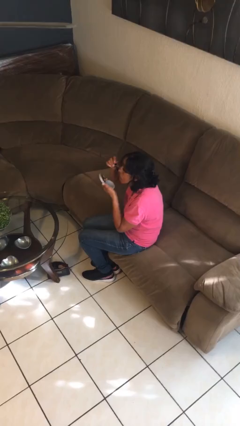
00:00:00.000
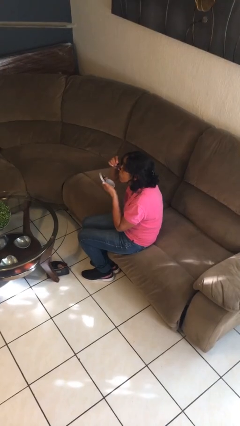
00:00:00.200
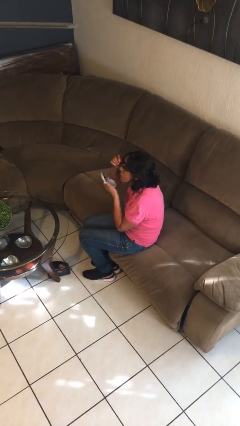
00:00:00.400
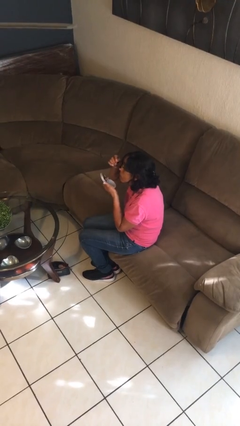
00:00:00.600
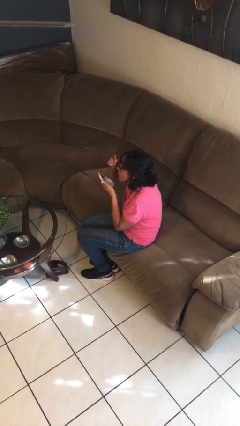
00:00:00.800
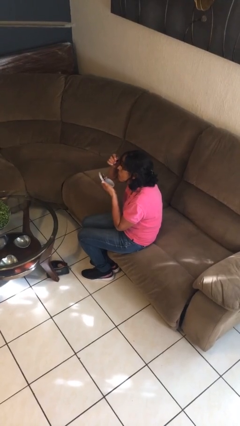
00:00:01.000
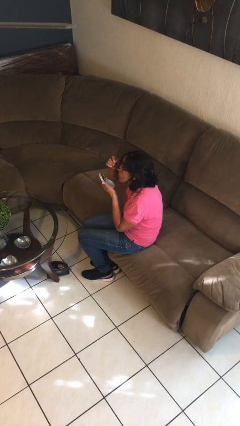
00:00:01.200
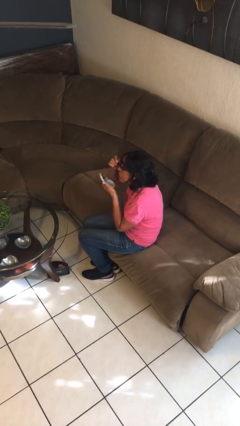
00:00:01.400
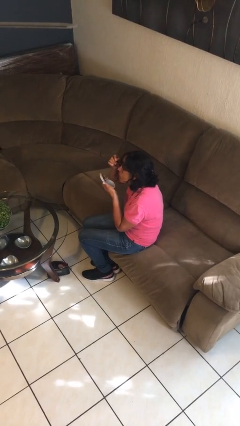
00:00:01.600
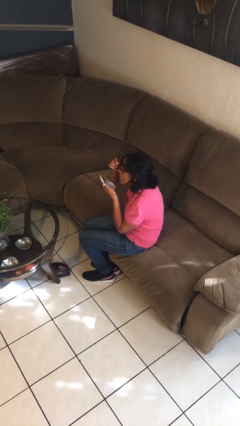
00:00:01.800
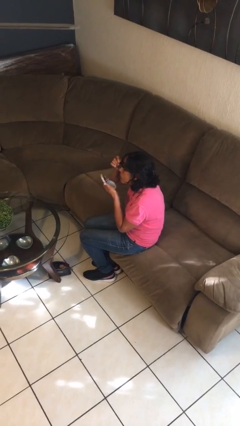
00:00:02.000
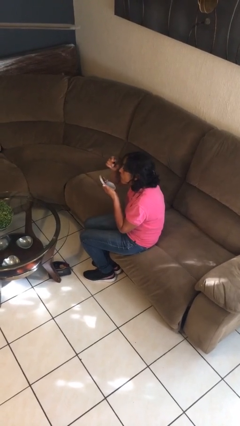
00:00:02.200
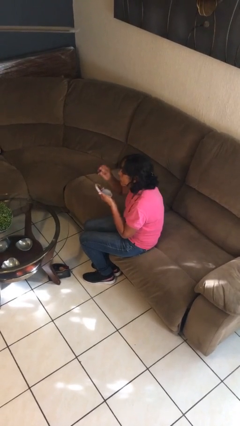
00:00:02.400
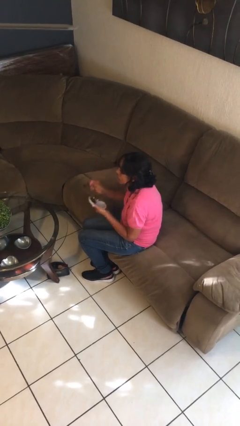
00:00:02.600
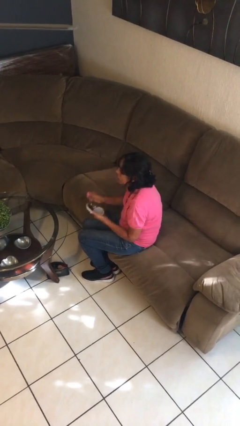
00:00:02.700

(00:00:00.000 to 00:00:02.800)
person applies eye makeup

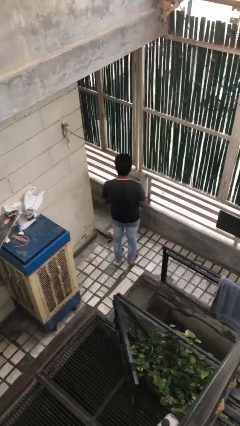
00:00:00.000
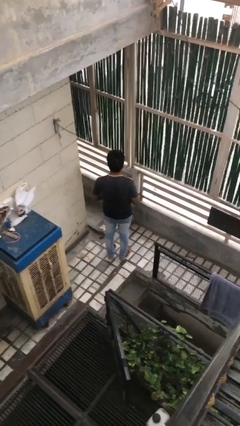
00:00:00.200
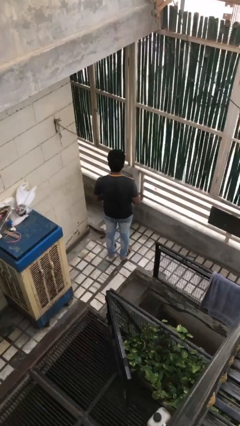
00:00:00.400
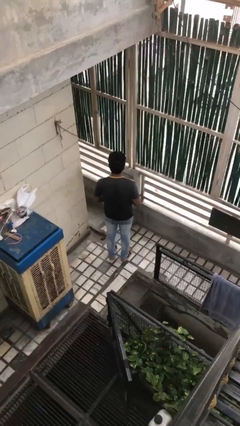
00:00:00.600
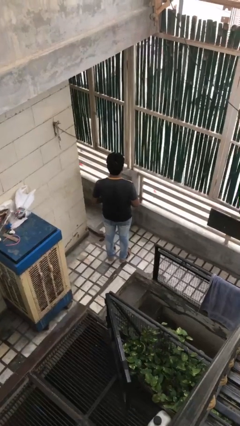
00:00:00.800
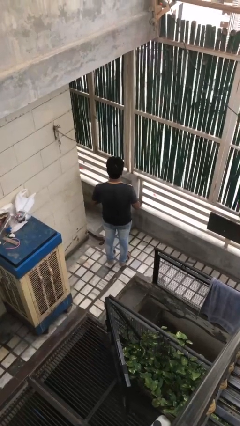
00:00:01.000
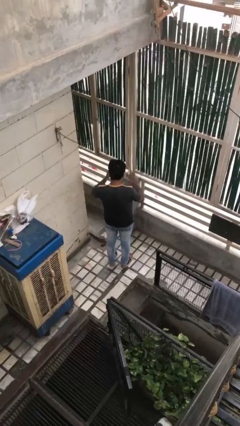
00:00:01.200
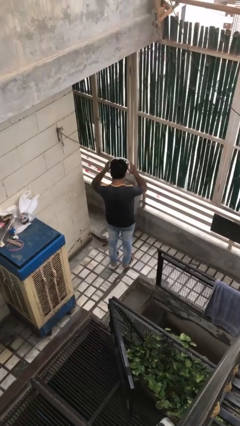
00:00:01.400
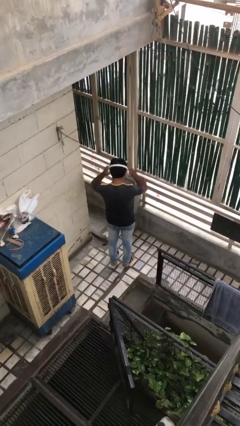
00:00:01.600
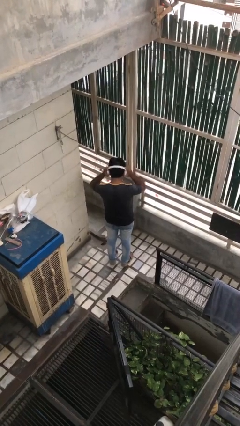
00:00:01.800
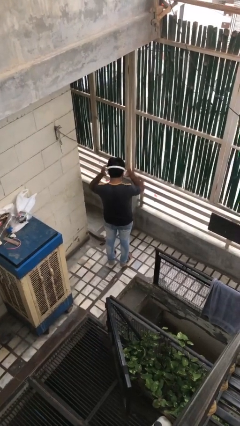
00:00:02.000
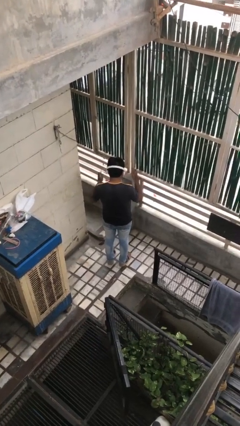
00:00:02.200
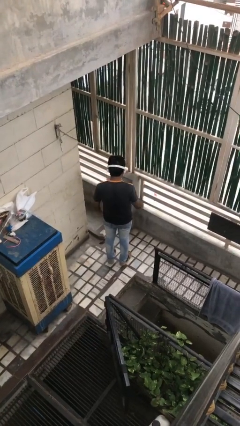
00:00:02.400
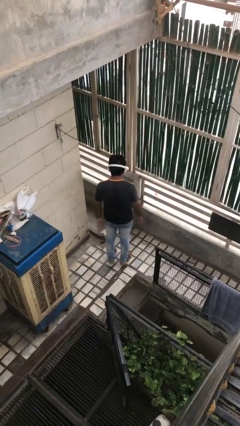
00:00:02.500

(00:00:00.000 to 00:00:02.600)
person puts on headphones

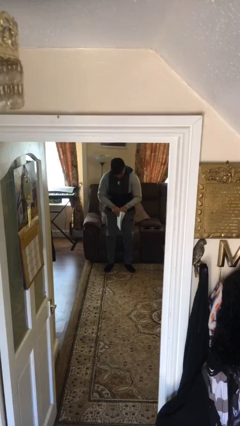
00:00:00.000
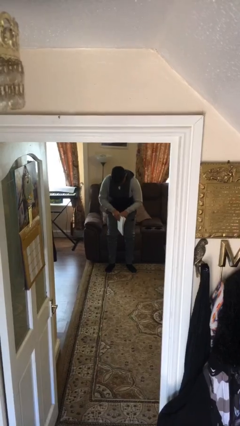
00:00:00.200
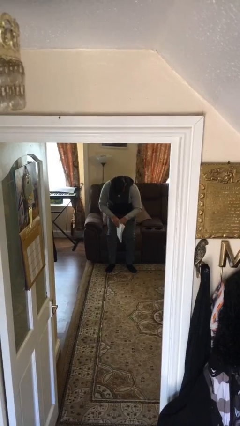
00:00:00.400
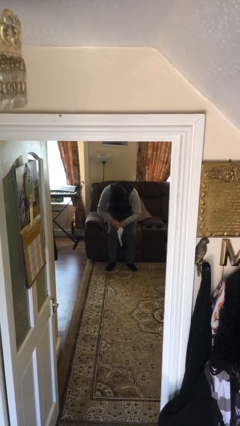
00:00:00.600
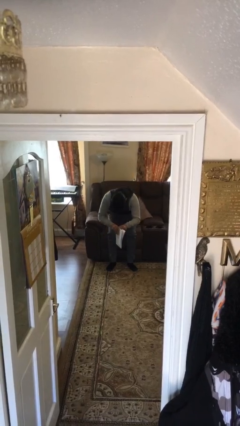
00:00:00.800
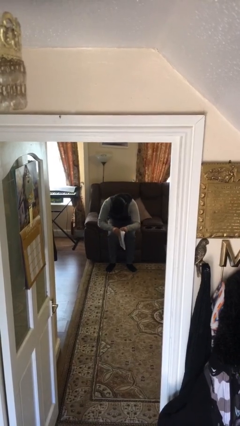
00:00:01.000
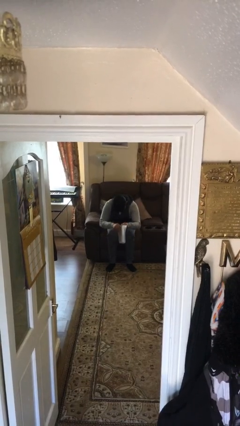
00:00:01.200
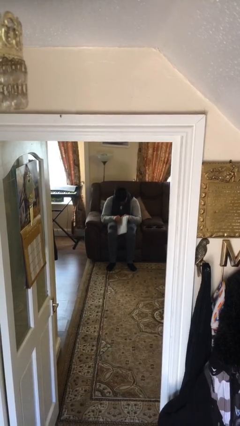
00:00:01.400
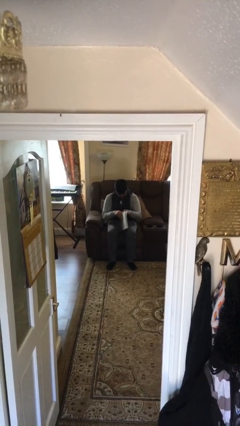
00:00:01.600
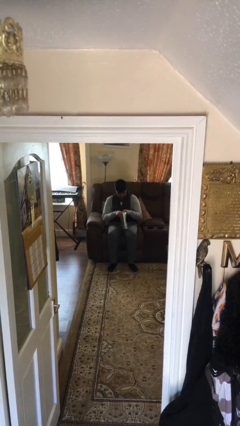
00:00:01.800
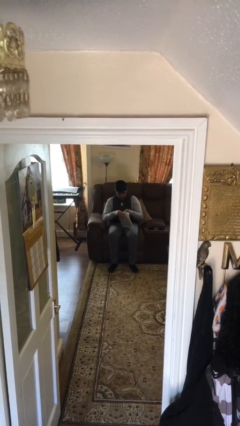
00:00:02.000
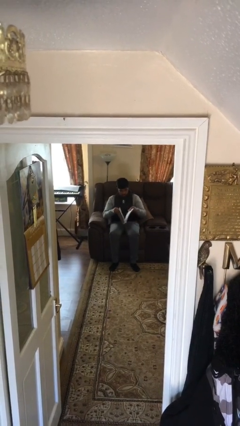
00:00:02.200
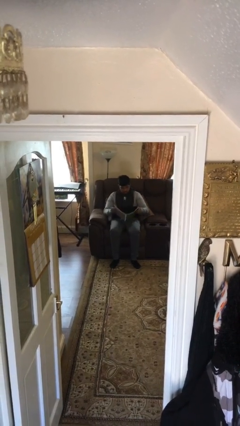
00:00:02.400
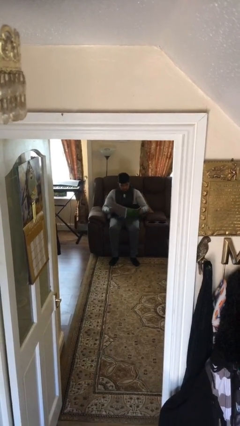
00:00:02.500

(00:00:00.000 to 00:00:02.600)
person sits down

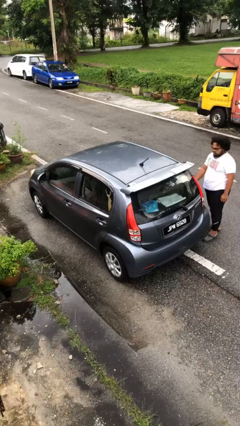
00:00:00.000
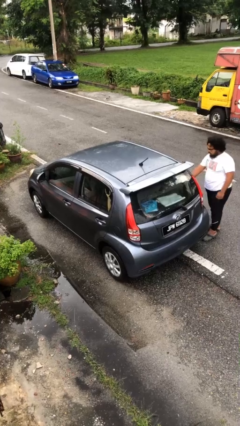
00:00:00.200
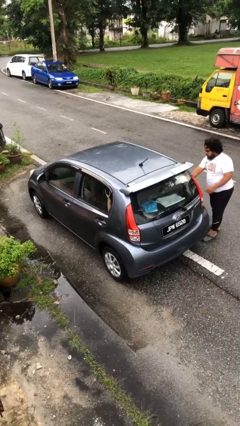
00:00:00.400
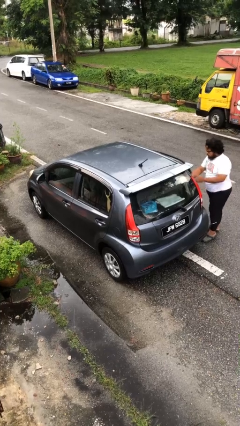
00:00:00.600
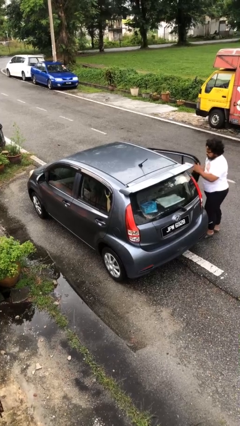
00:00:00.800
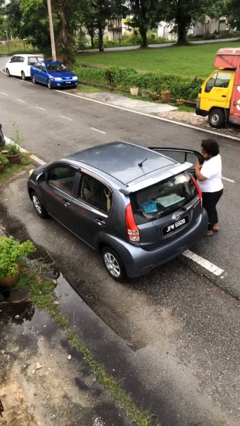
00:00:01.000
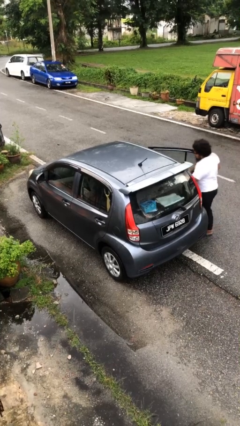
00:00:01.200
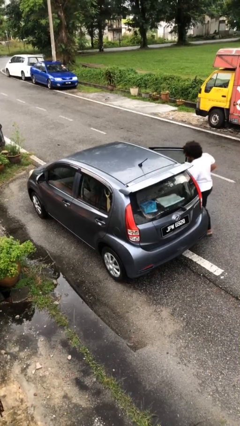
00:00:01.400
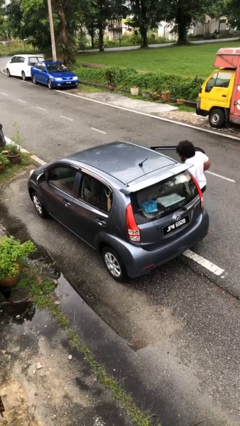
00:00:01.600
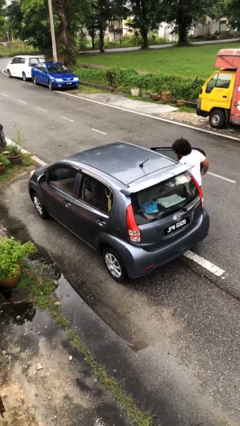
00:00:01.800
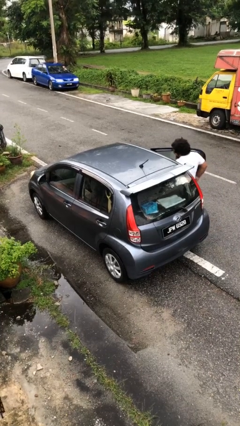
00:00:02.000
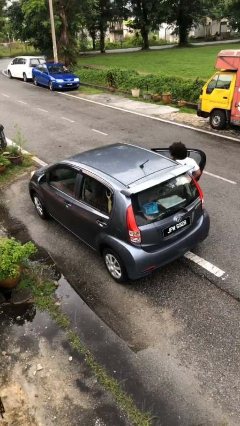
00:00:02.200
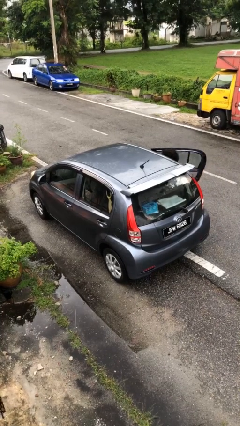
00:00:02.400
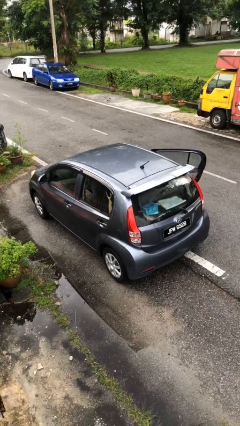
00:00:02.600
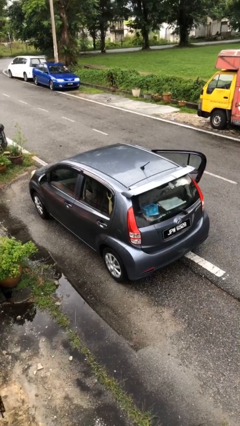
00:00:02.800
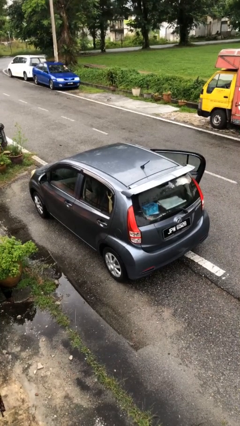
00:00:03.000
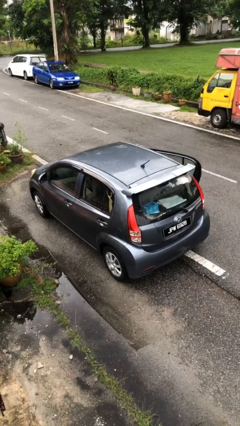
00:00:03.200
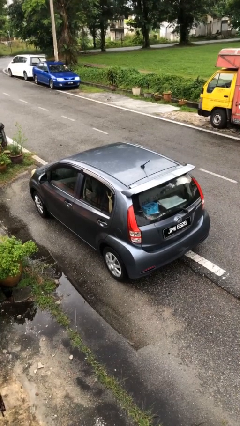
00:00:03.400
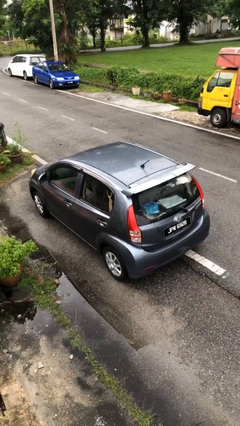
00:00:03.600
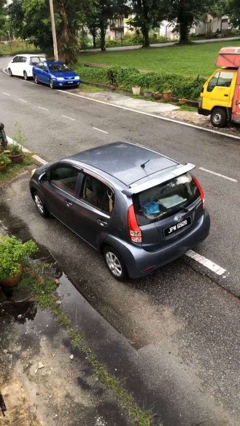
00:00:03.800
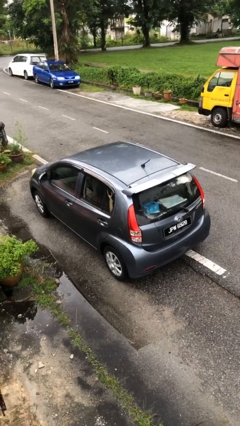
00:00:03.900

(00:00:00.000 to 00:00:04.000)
car picks up person

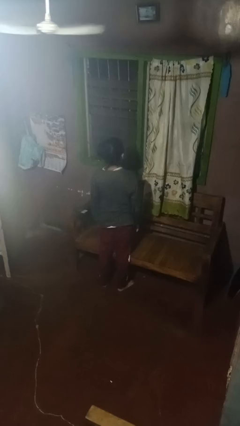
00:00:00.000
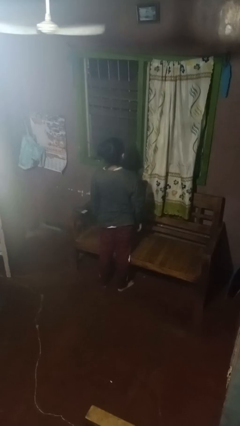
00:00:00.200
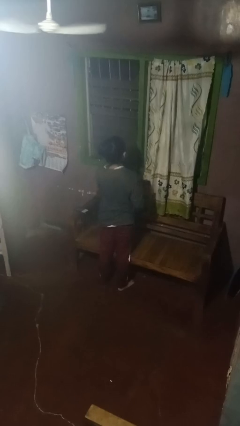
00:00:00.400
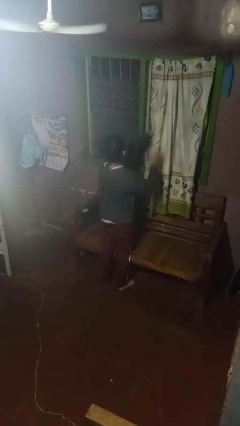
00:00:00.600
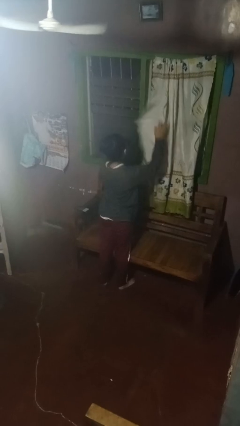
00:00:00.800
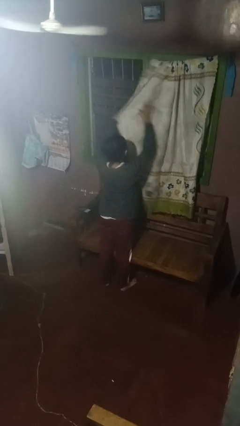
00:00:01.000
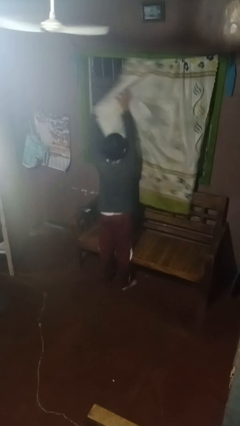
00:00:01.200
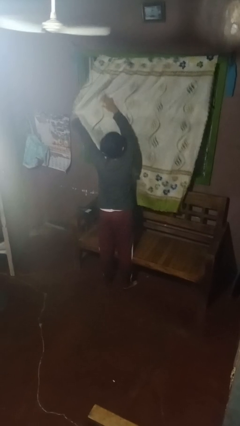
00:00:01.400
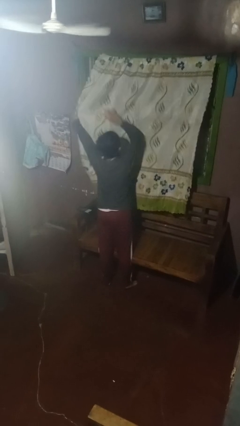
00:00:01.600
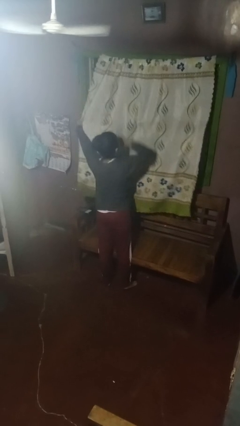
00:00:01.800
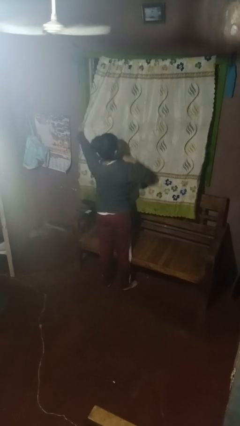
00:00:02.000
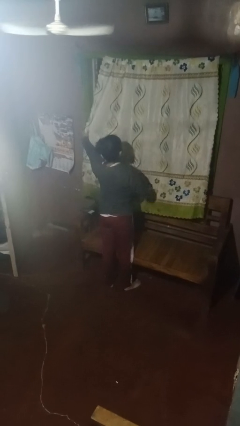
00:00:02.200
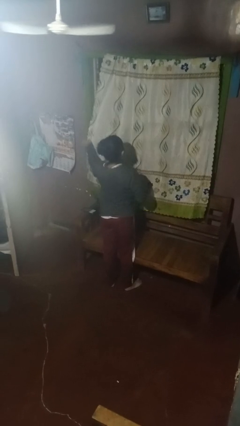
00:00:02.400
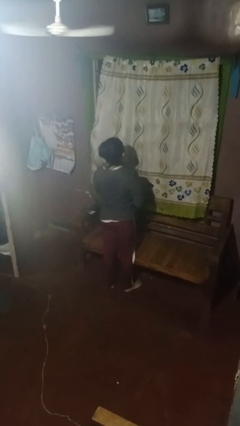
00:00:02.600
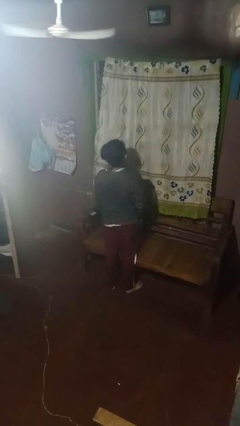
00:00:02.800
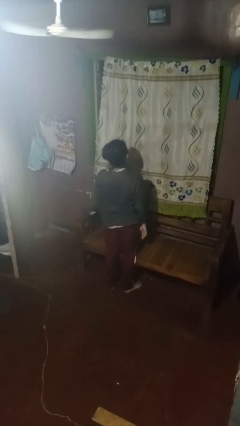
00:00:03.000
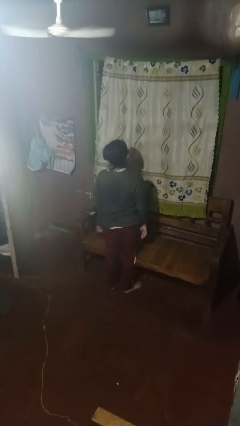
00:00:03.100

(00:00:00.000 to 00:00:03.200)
person closes curtains

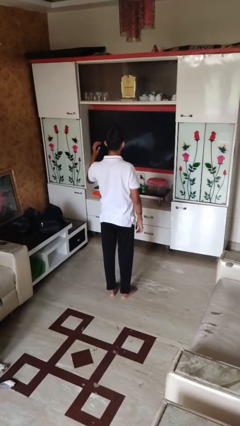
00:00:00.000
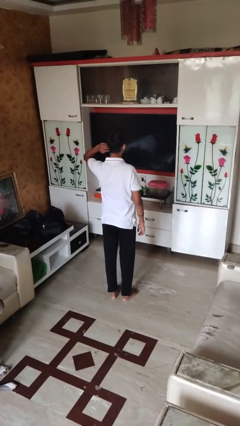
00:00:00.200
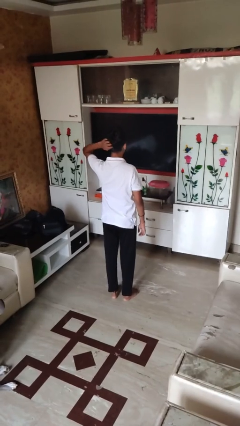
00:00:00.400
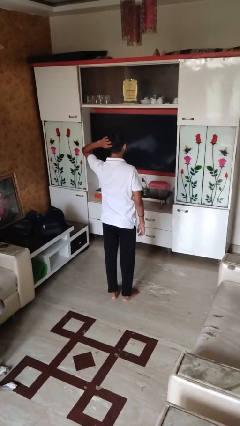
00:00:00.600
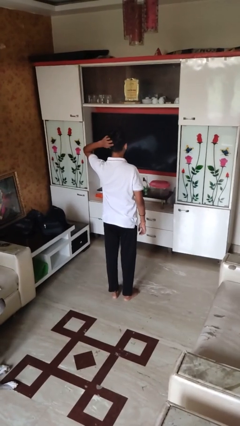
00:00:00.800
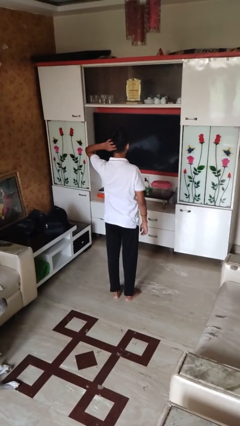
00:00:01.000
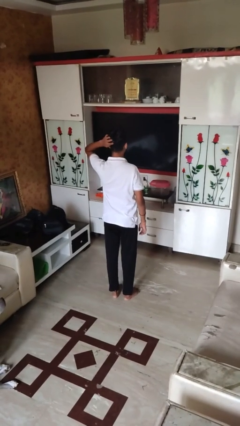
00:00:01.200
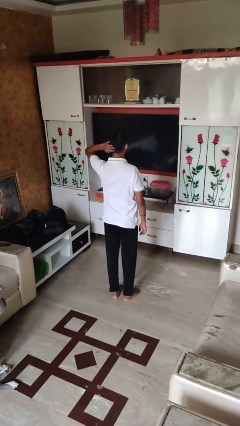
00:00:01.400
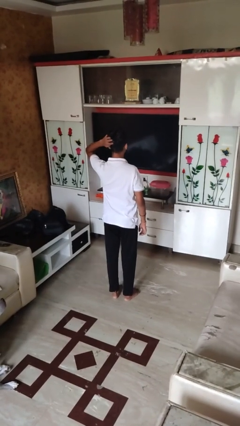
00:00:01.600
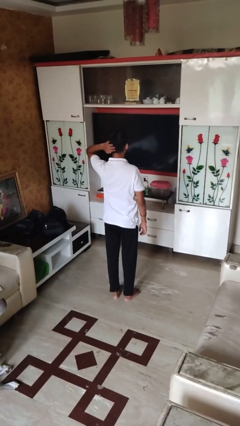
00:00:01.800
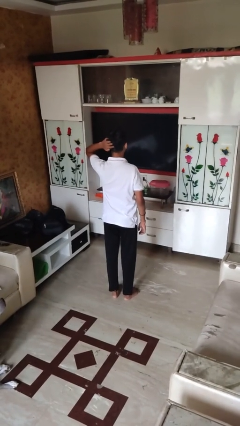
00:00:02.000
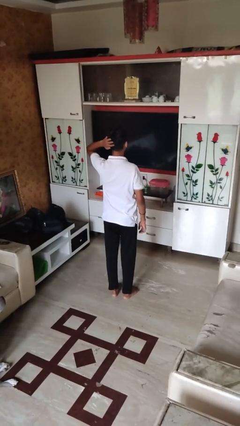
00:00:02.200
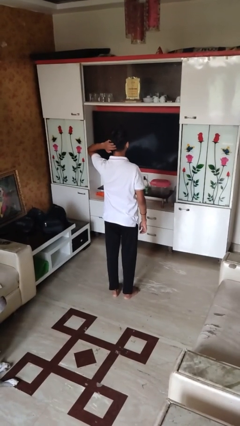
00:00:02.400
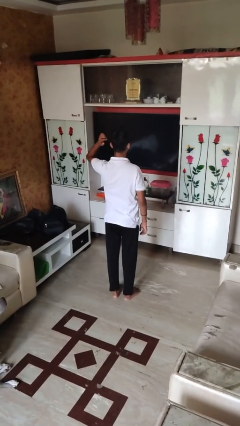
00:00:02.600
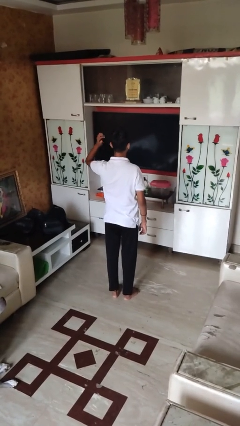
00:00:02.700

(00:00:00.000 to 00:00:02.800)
person scratches face
